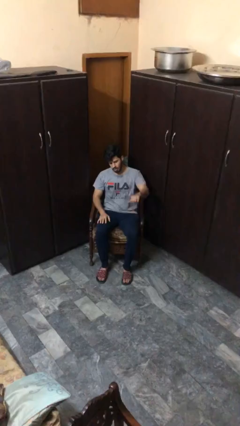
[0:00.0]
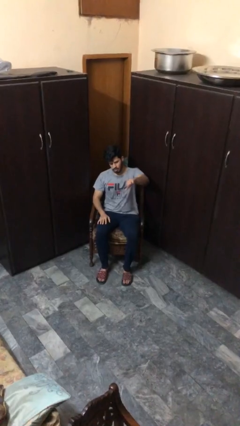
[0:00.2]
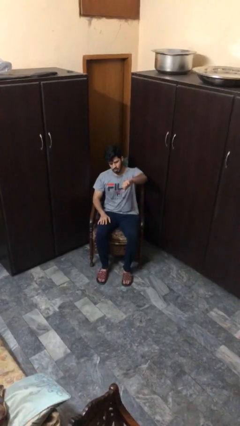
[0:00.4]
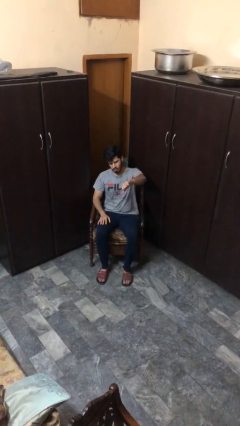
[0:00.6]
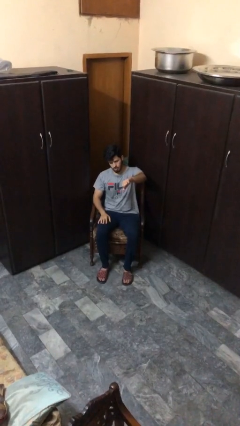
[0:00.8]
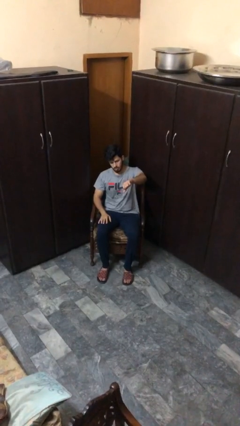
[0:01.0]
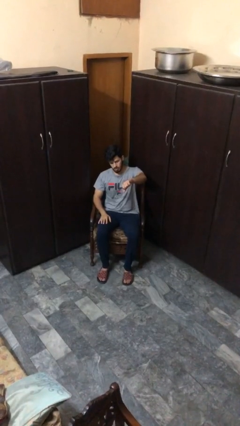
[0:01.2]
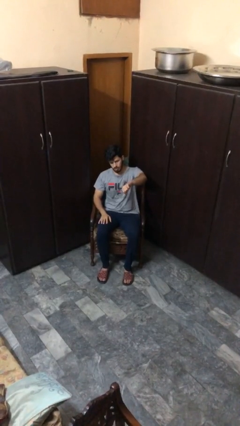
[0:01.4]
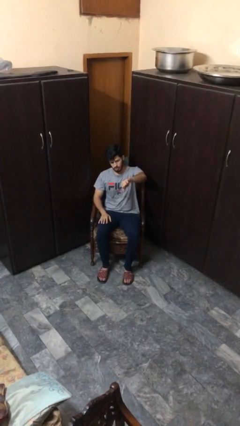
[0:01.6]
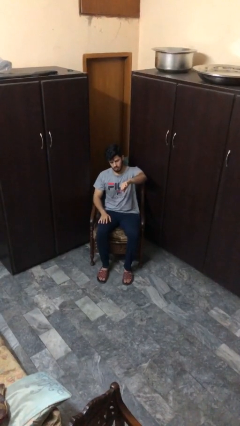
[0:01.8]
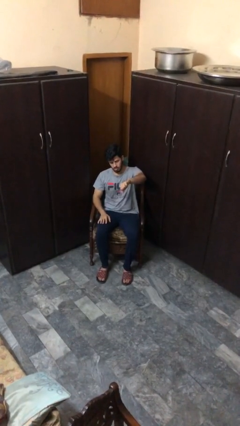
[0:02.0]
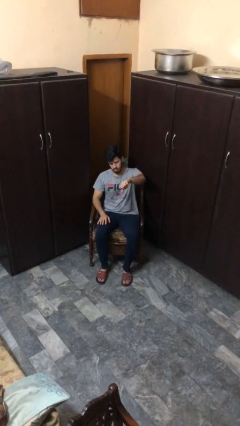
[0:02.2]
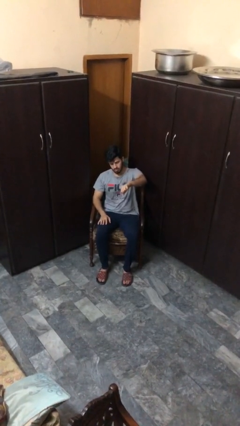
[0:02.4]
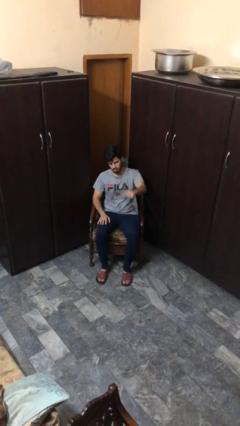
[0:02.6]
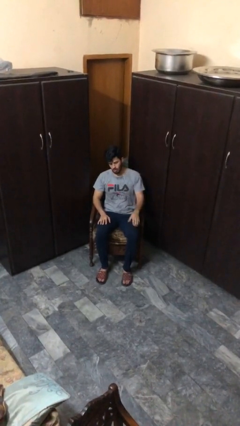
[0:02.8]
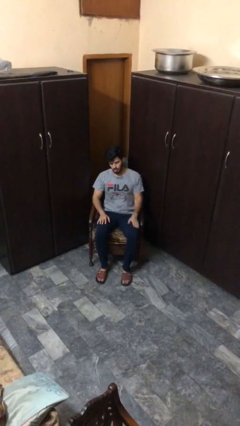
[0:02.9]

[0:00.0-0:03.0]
person gestures thumbs down

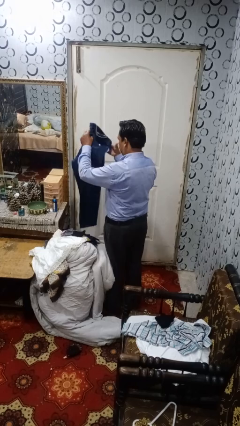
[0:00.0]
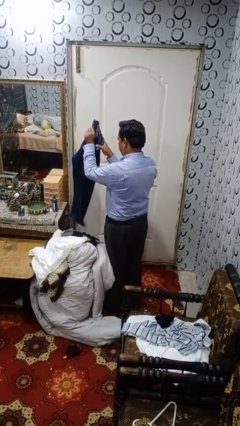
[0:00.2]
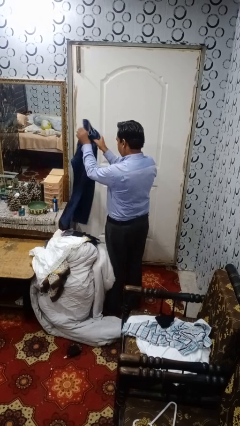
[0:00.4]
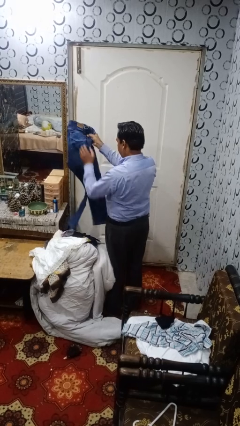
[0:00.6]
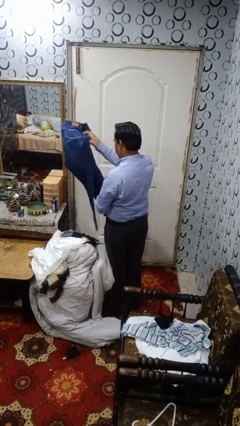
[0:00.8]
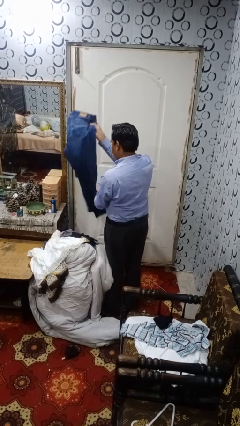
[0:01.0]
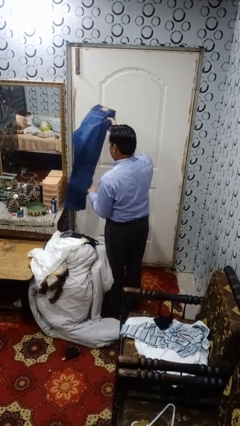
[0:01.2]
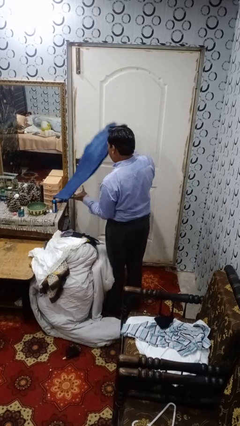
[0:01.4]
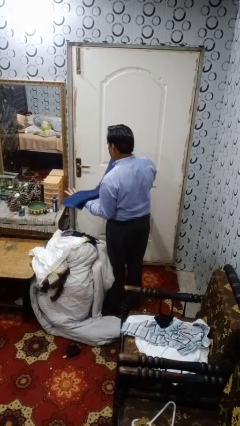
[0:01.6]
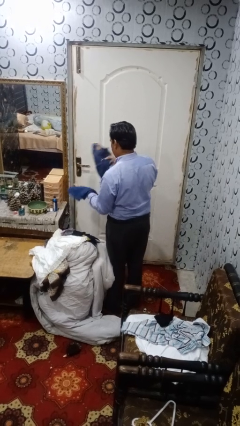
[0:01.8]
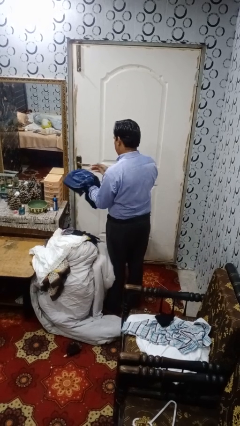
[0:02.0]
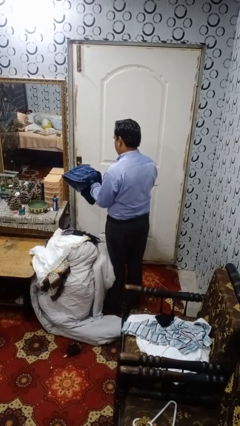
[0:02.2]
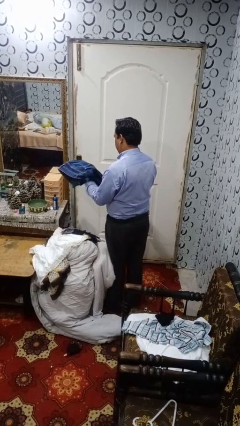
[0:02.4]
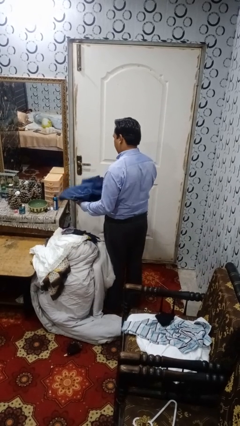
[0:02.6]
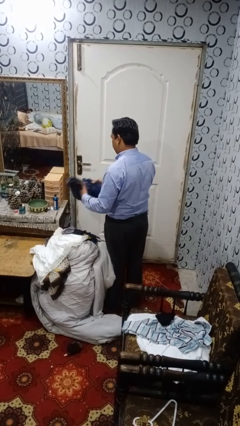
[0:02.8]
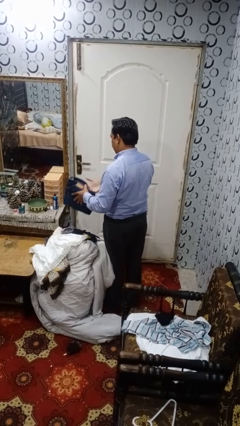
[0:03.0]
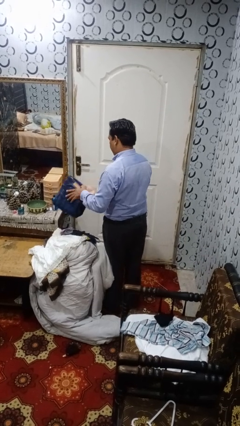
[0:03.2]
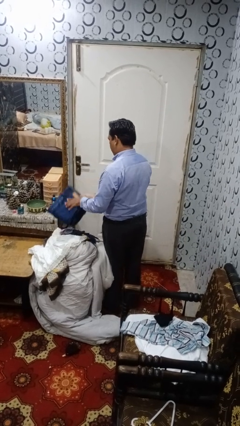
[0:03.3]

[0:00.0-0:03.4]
person folds pants

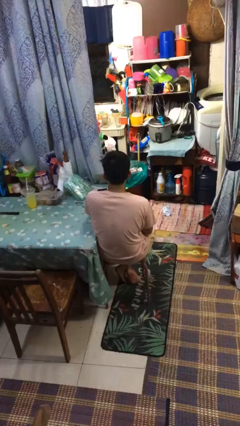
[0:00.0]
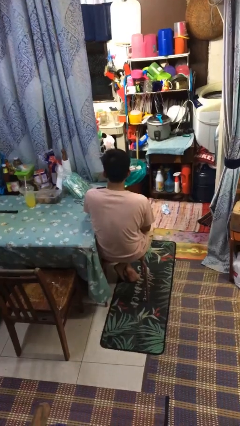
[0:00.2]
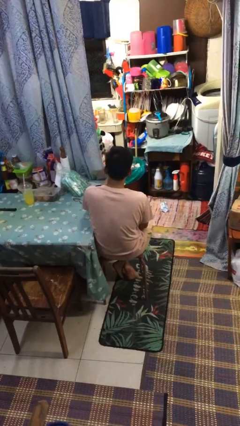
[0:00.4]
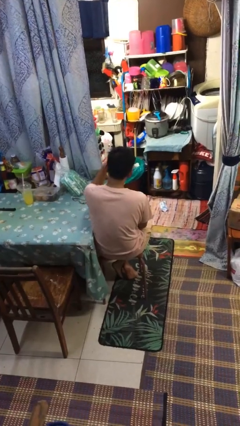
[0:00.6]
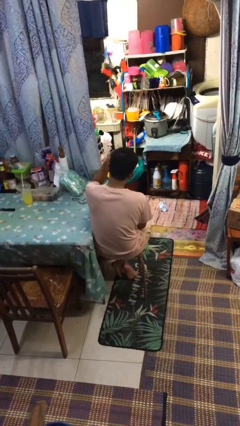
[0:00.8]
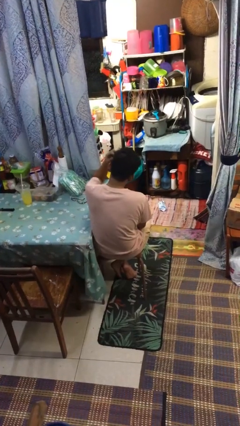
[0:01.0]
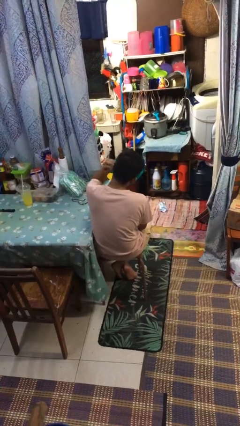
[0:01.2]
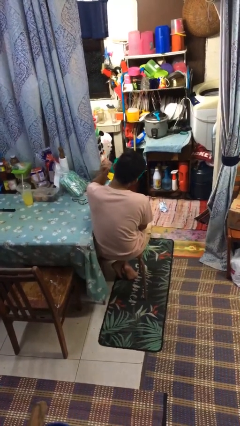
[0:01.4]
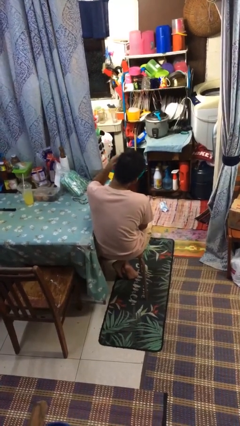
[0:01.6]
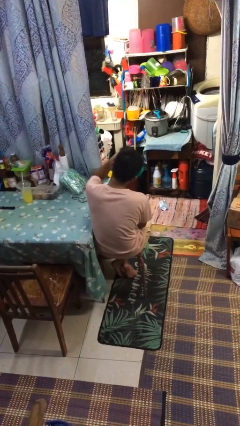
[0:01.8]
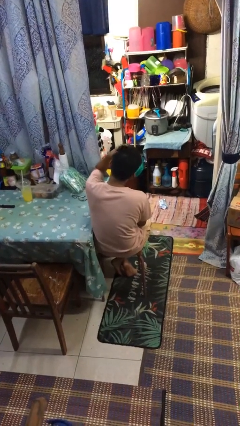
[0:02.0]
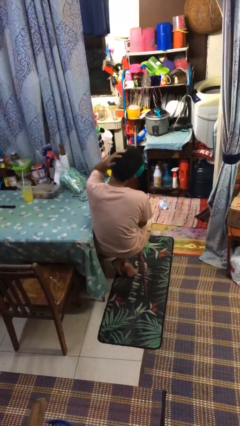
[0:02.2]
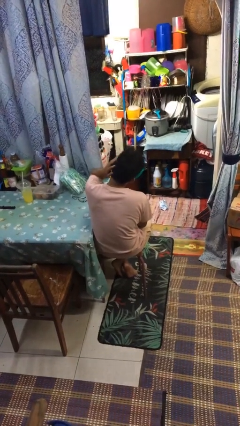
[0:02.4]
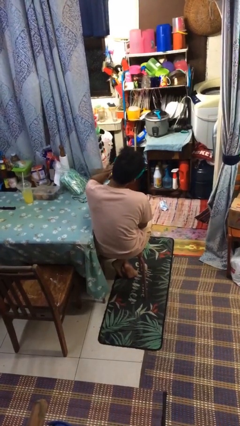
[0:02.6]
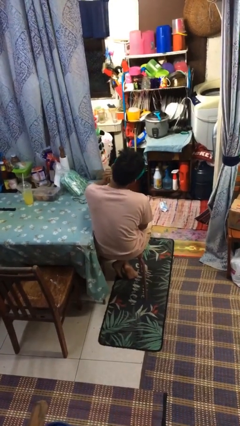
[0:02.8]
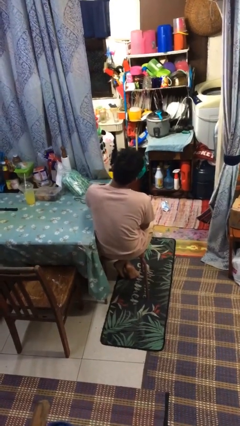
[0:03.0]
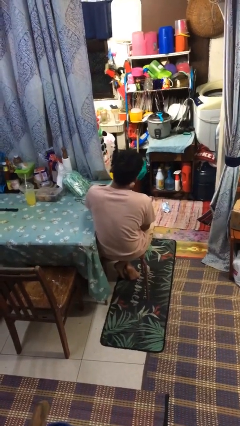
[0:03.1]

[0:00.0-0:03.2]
person strokes hair

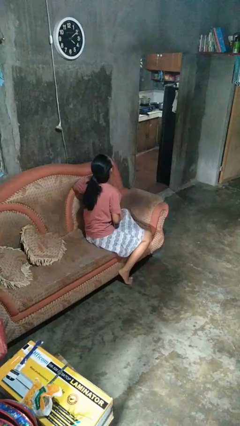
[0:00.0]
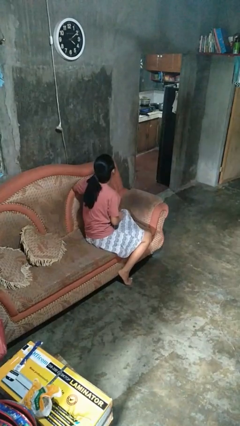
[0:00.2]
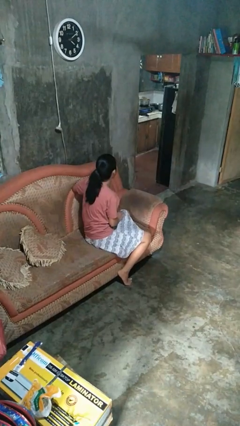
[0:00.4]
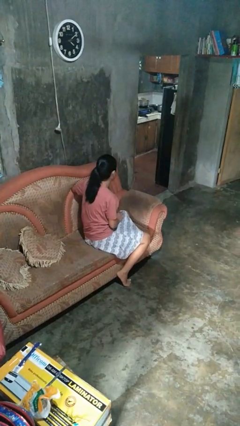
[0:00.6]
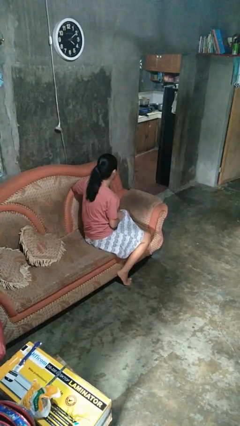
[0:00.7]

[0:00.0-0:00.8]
person yawns

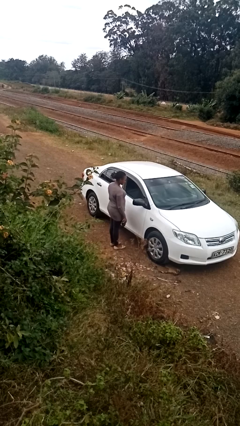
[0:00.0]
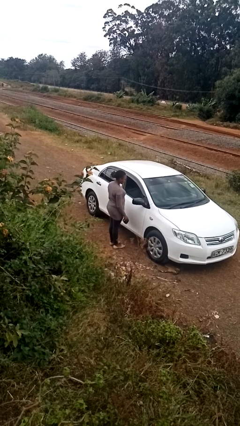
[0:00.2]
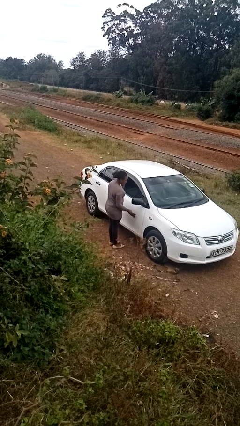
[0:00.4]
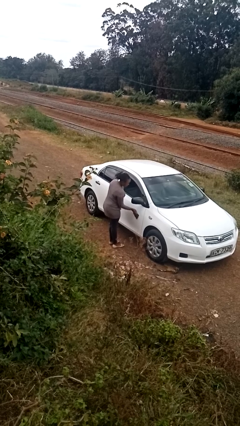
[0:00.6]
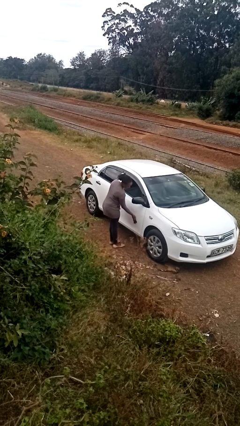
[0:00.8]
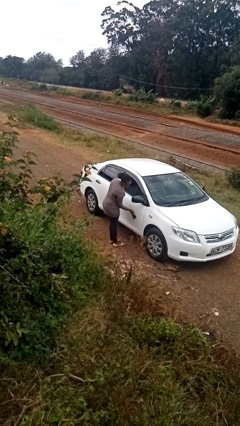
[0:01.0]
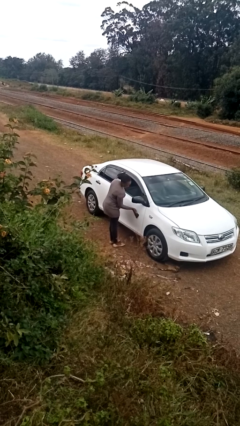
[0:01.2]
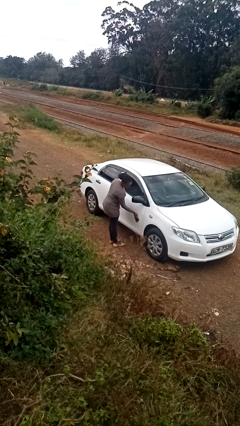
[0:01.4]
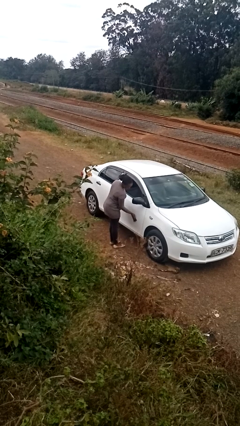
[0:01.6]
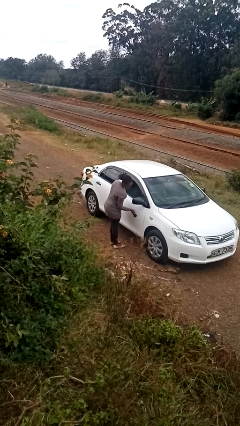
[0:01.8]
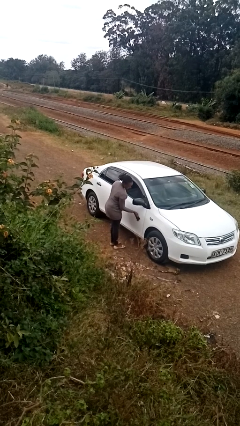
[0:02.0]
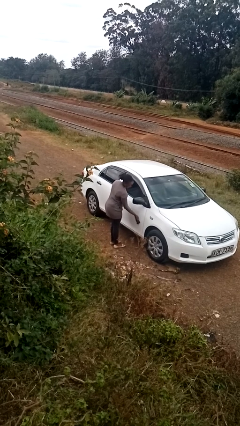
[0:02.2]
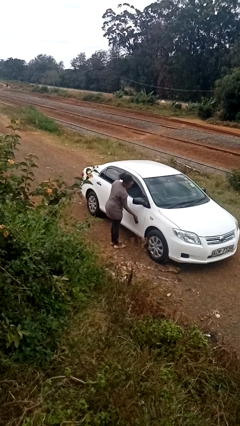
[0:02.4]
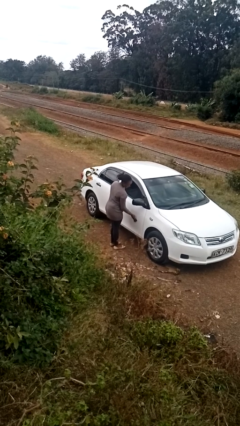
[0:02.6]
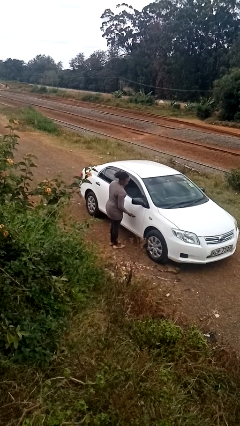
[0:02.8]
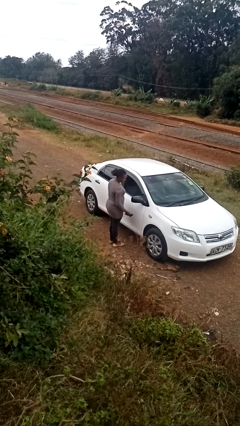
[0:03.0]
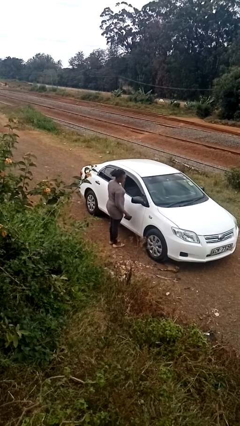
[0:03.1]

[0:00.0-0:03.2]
person polishes car with rag

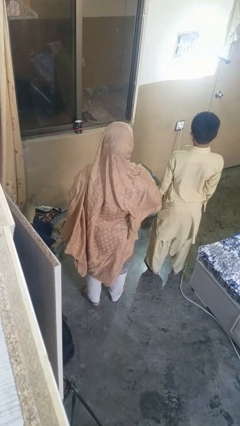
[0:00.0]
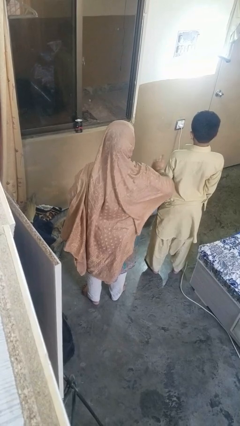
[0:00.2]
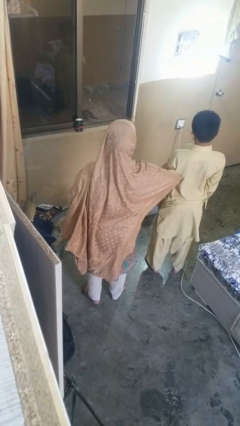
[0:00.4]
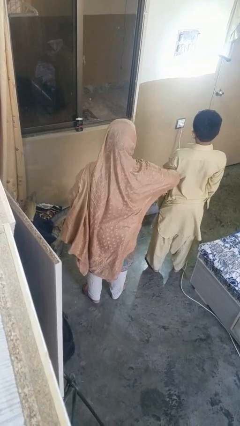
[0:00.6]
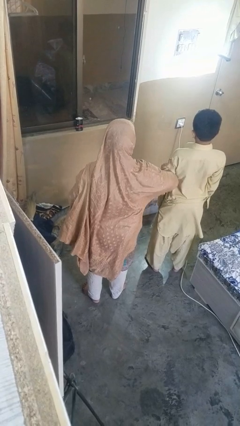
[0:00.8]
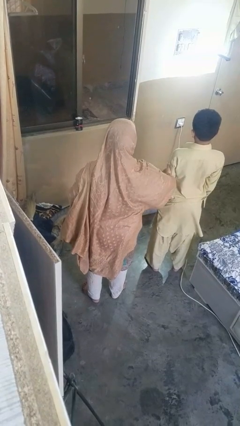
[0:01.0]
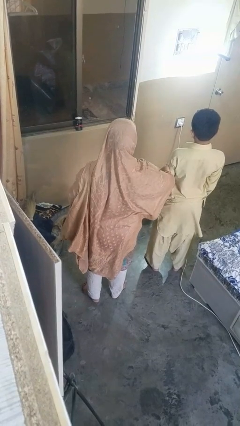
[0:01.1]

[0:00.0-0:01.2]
person grabs person by bicep

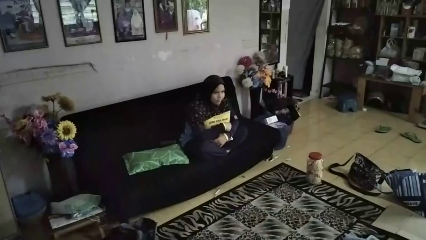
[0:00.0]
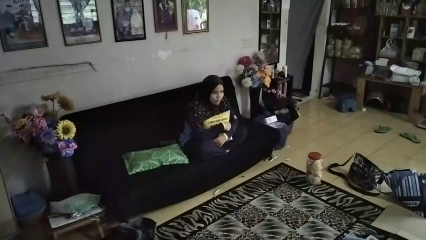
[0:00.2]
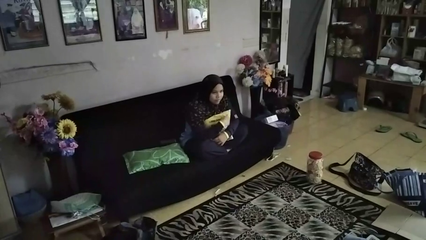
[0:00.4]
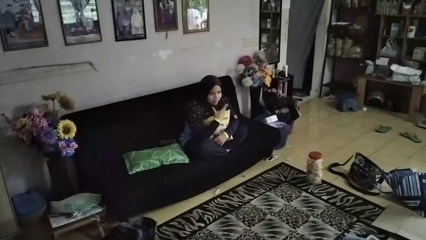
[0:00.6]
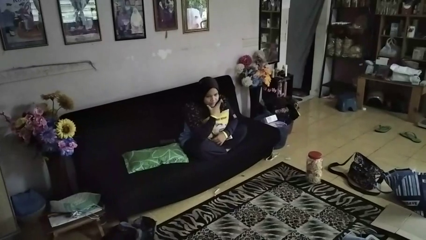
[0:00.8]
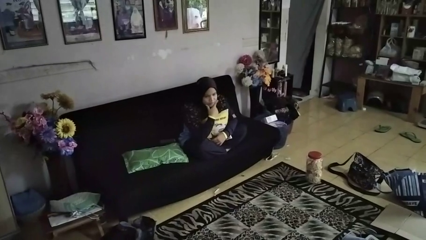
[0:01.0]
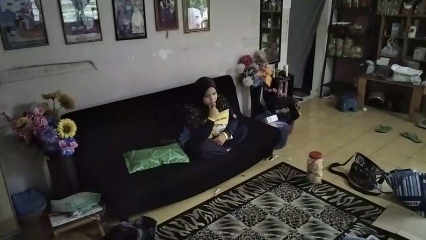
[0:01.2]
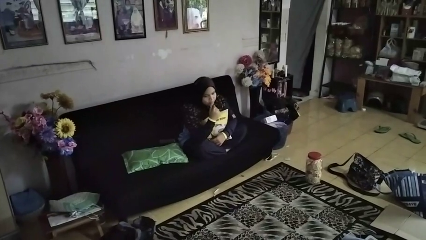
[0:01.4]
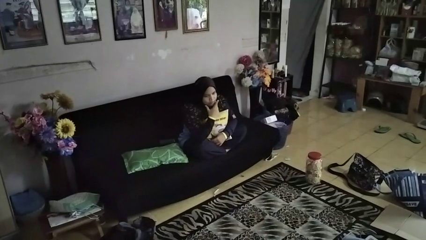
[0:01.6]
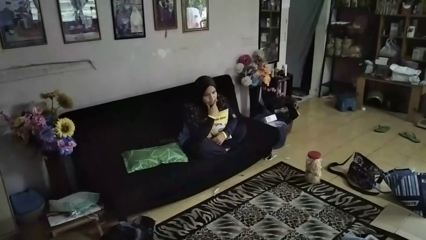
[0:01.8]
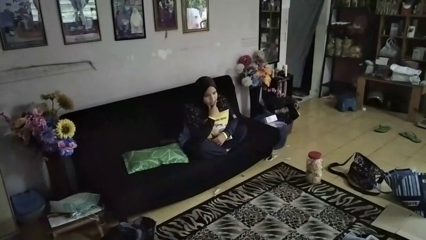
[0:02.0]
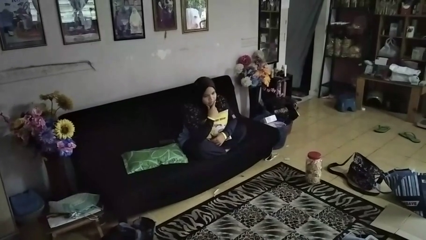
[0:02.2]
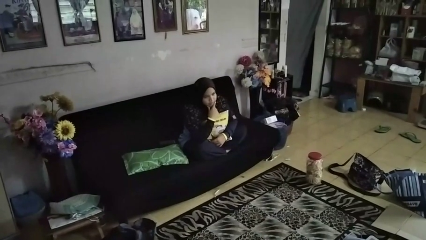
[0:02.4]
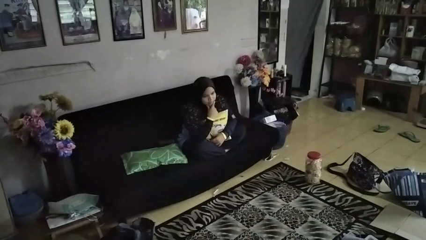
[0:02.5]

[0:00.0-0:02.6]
person strokes chin
